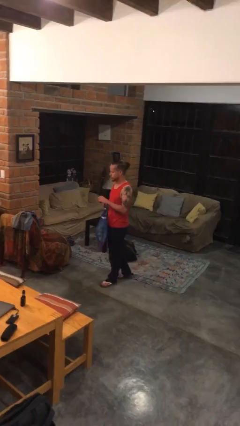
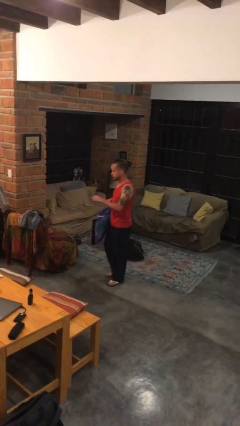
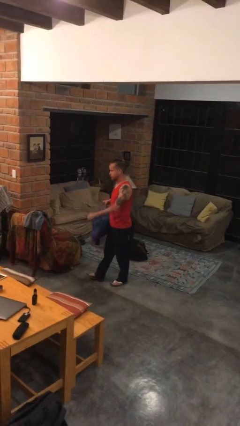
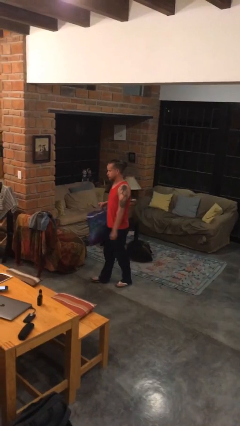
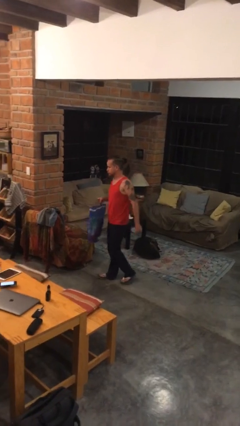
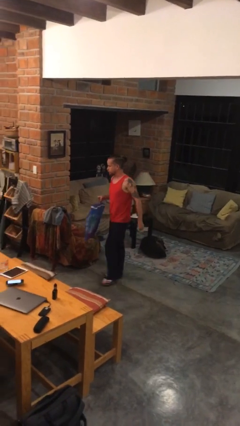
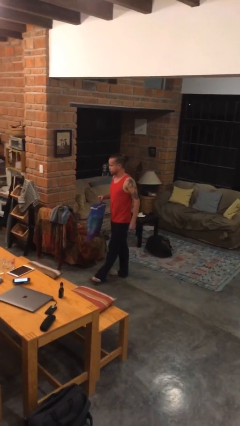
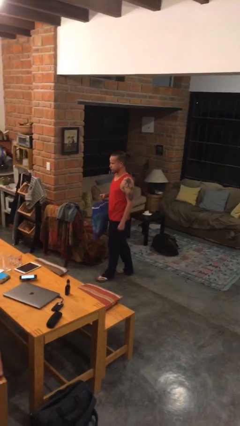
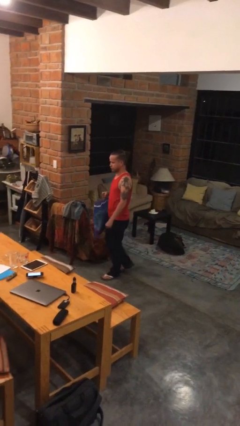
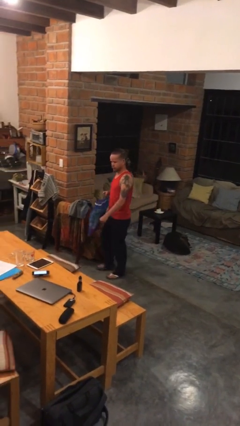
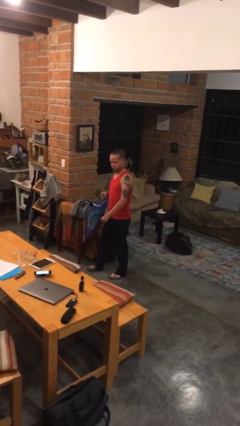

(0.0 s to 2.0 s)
person carries groceries

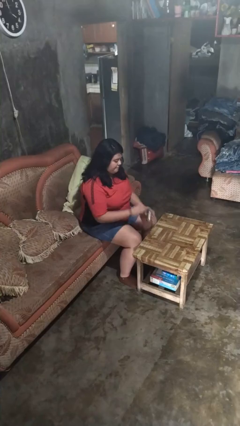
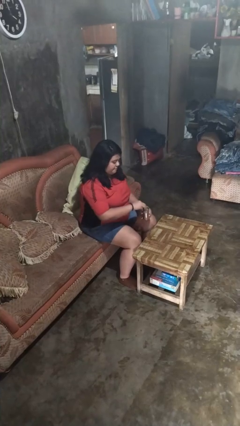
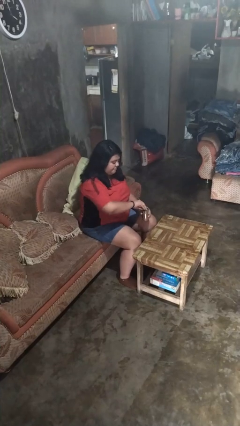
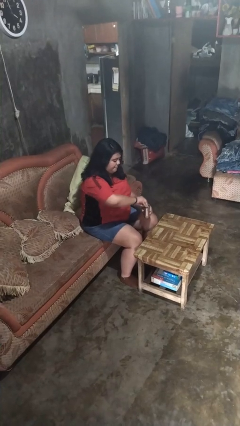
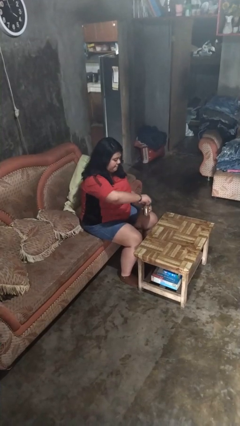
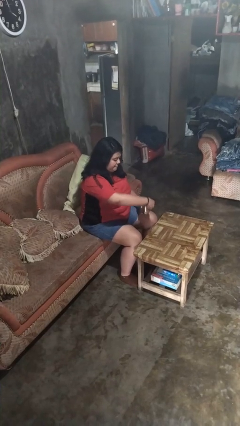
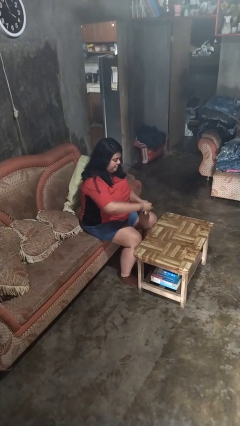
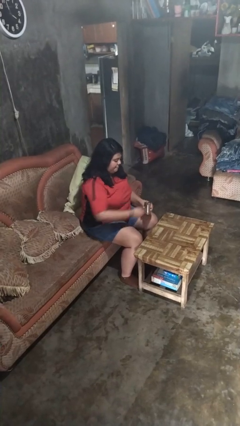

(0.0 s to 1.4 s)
person opens beverage can

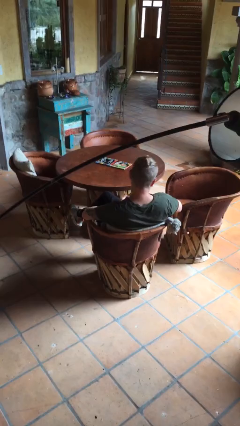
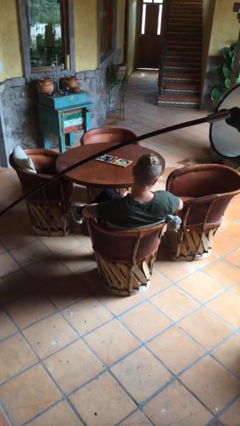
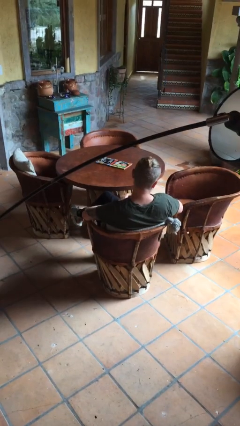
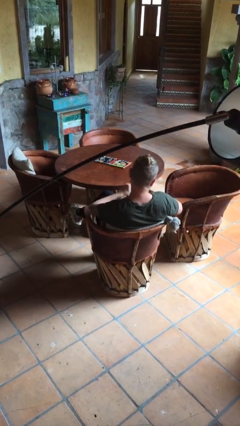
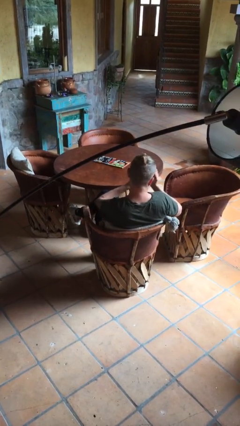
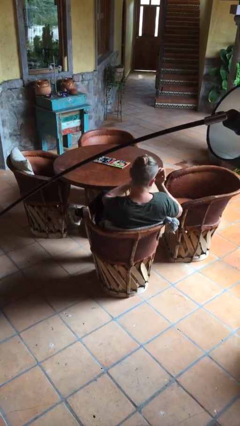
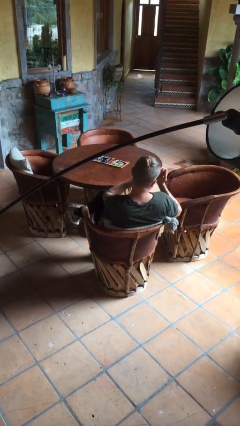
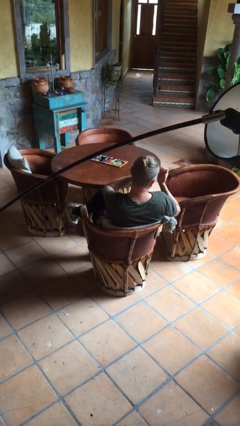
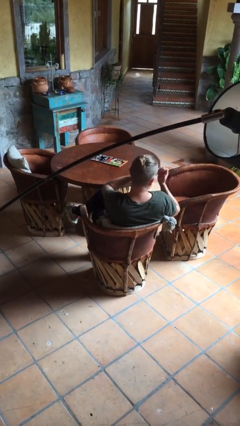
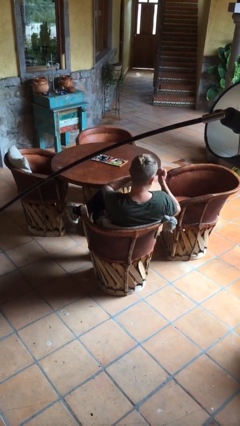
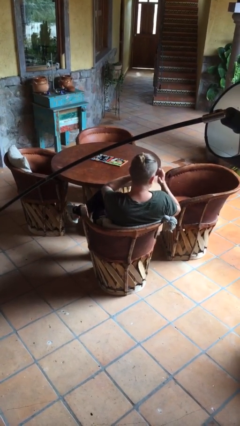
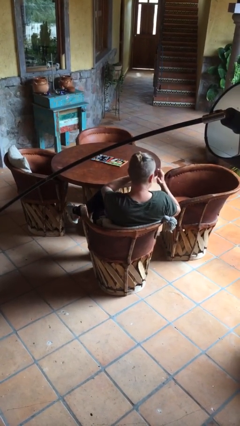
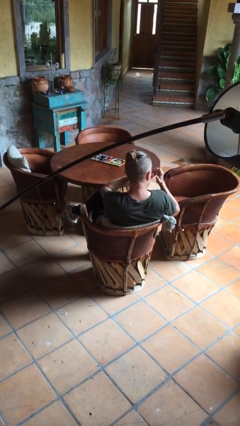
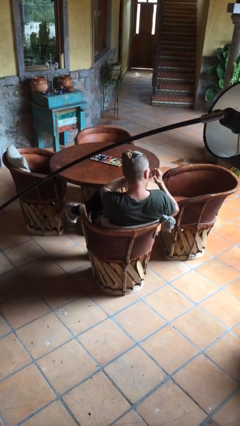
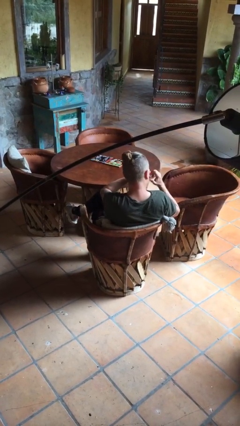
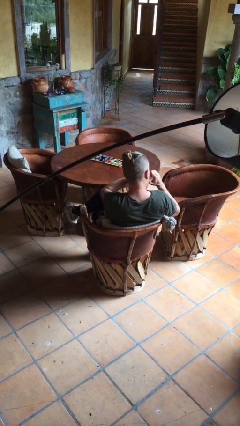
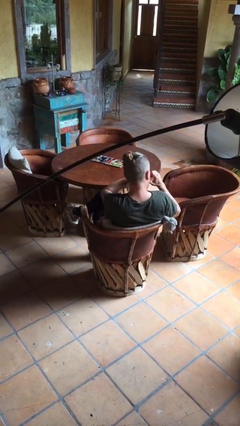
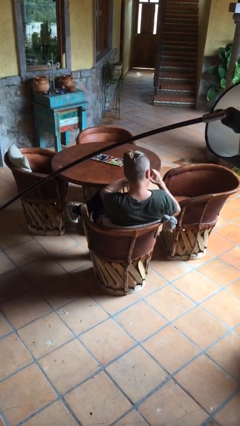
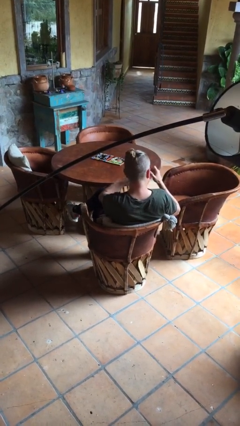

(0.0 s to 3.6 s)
person clips fingernails

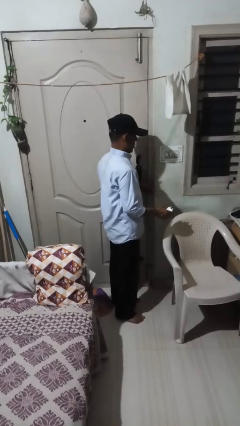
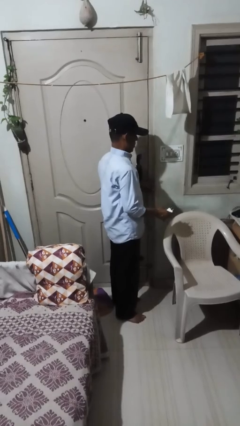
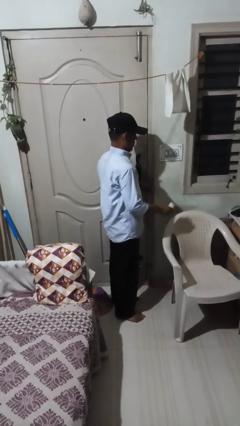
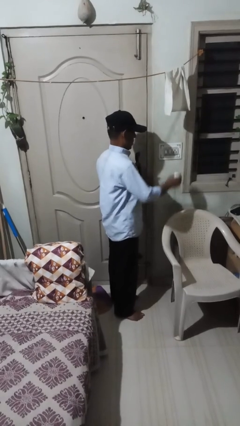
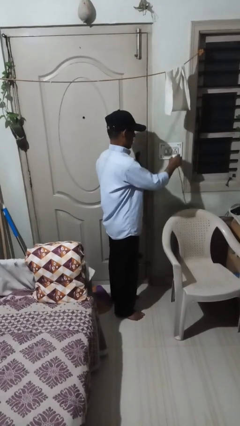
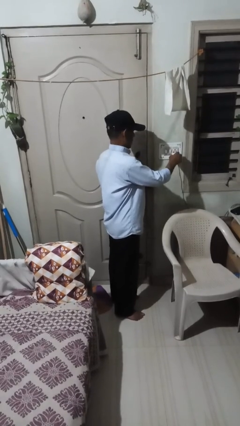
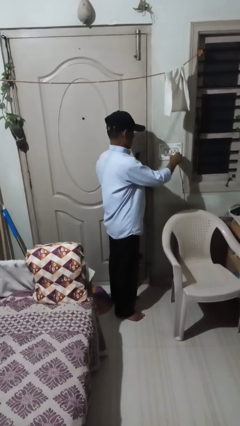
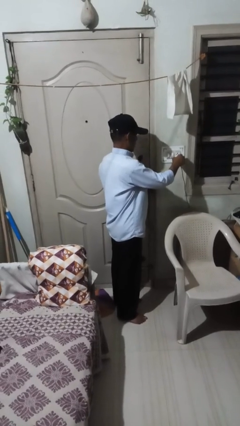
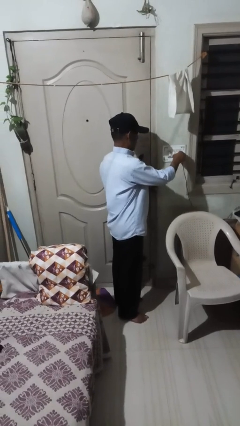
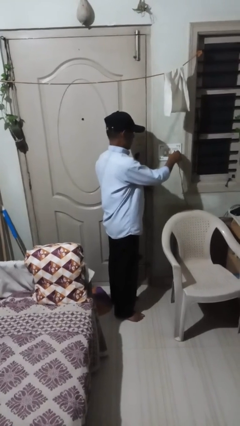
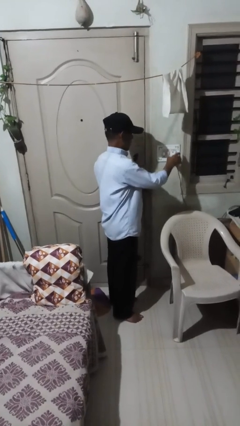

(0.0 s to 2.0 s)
person plugs into electrical socket

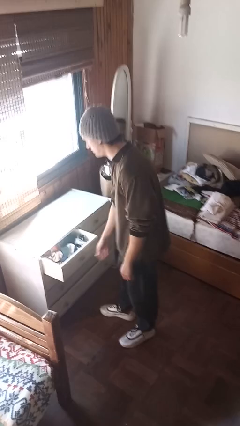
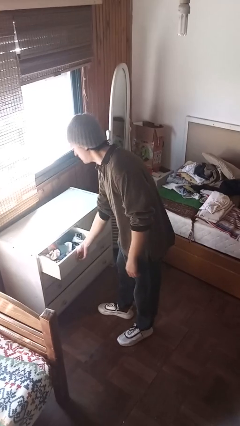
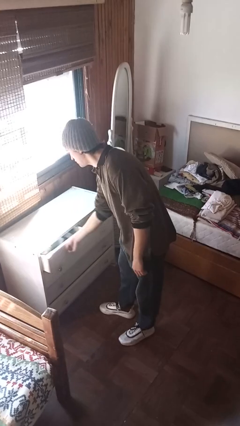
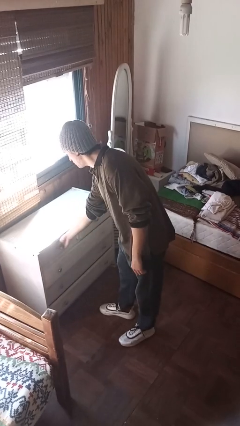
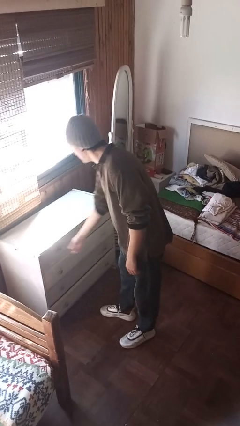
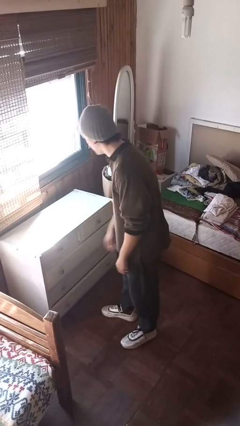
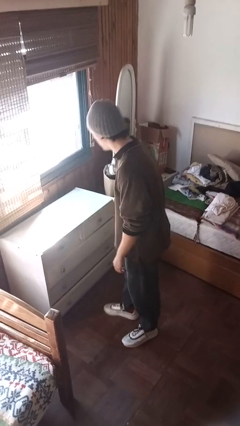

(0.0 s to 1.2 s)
person closes dresser drawer

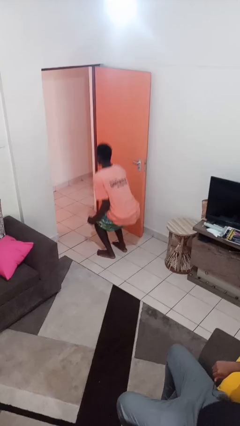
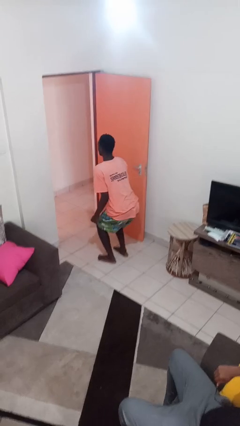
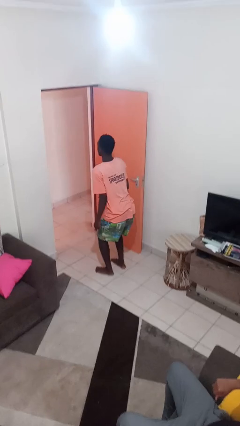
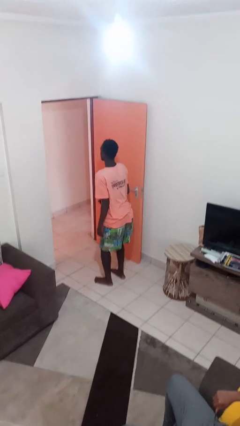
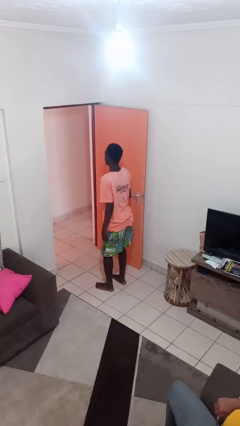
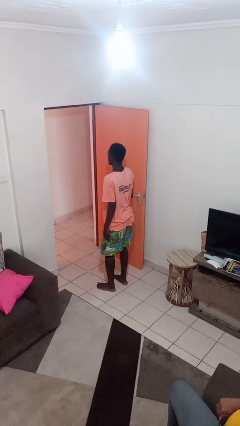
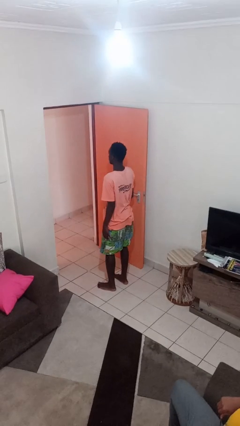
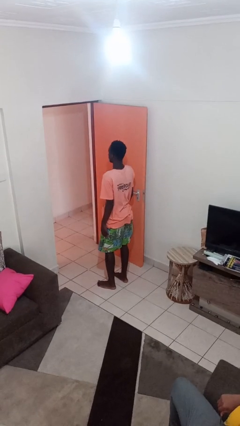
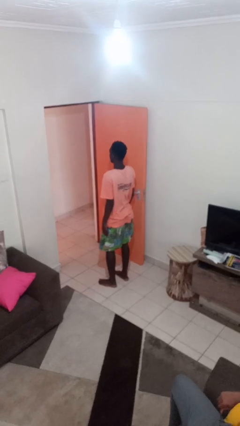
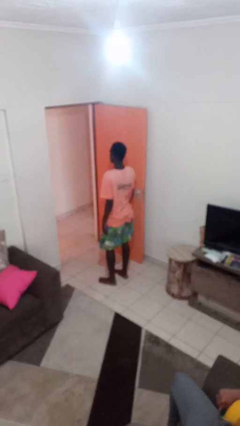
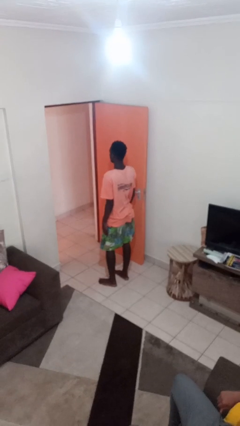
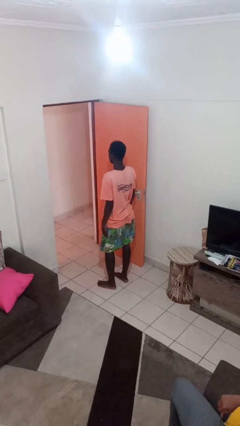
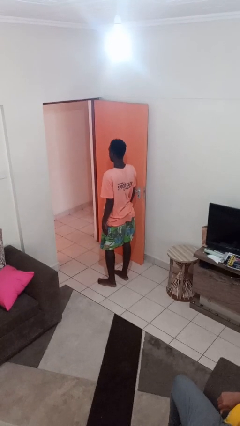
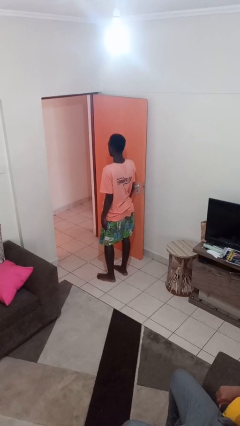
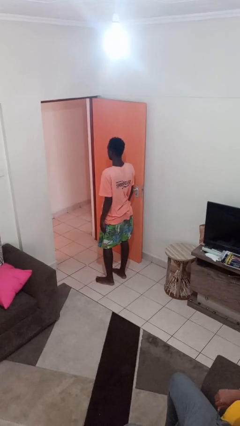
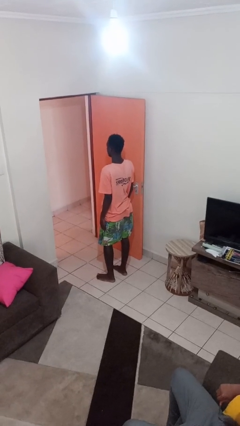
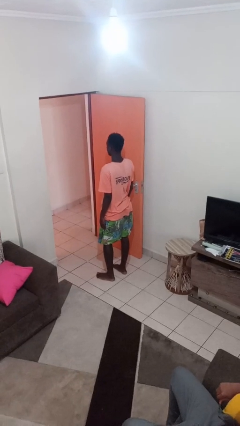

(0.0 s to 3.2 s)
person stands up

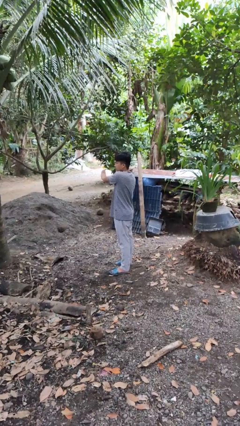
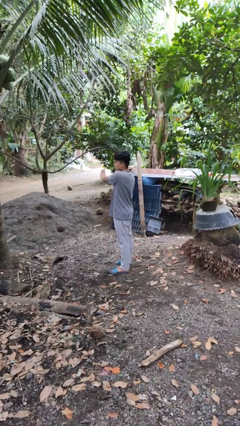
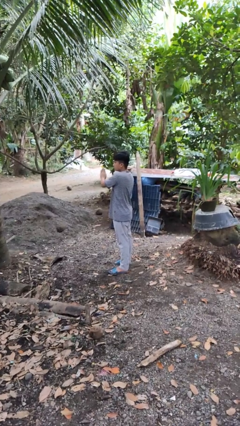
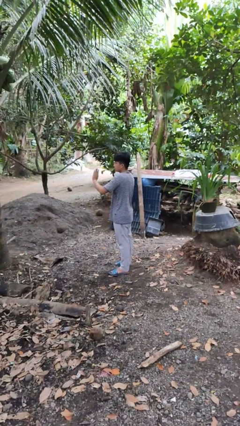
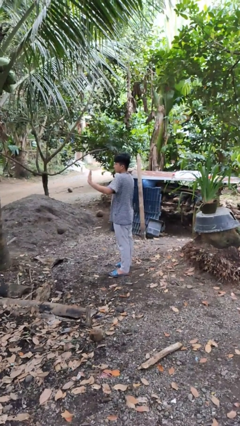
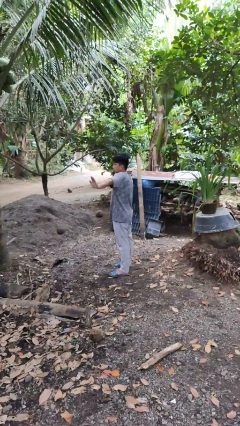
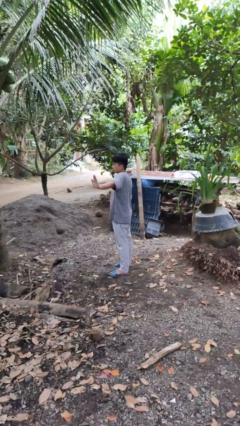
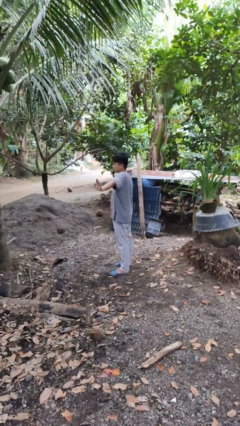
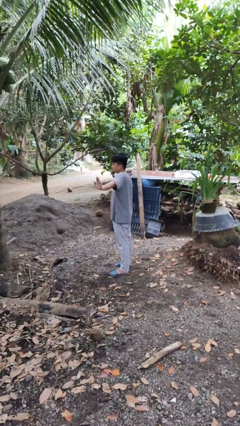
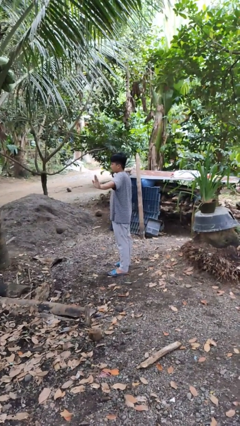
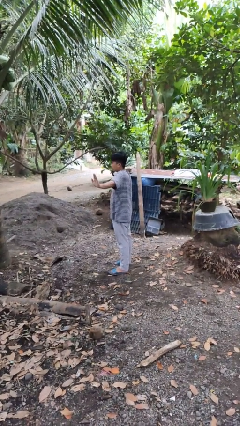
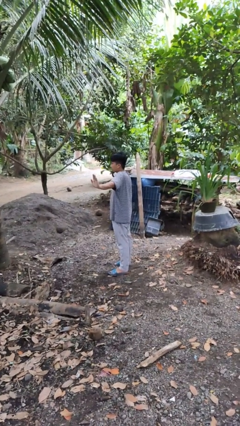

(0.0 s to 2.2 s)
person gestures swipe left

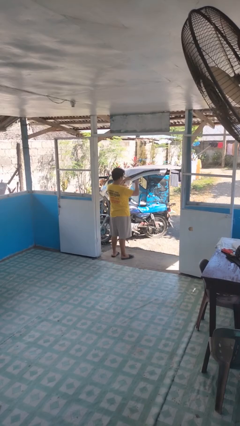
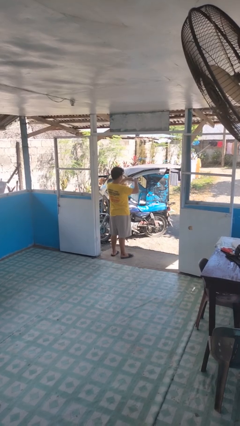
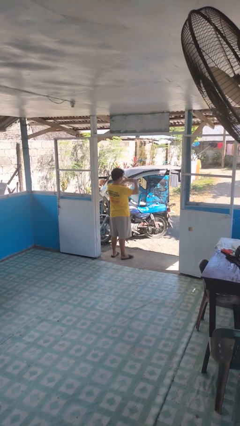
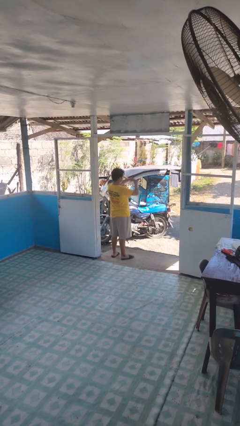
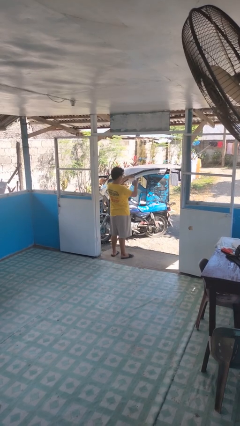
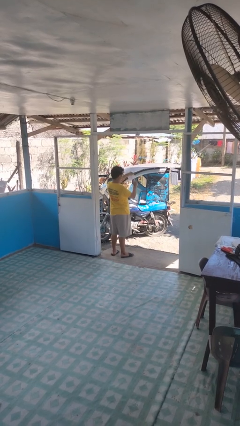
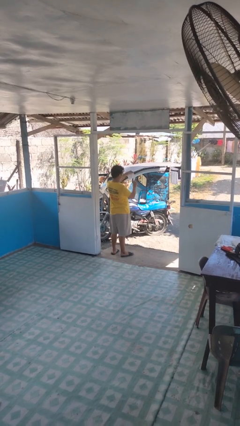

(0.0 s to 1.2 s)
person tears paper

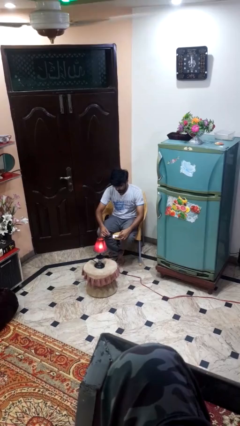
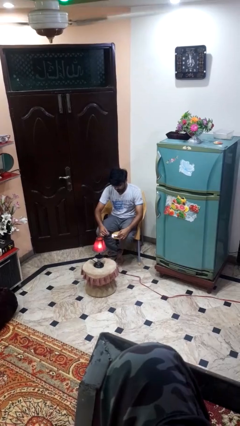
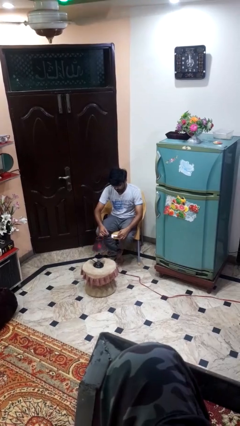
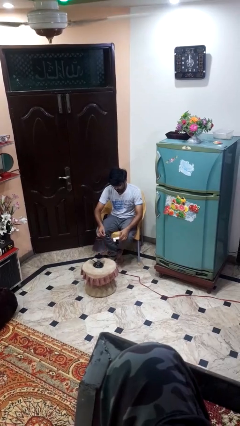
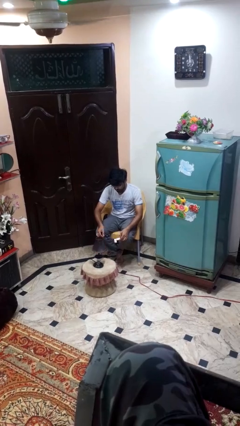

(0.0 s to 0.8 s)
person turns off lamp
